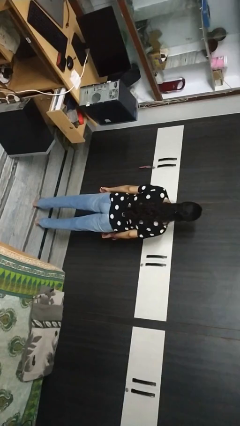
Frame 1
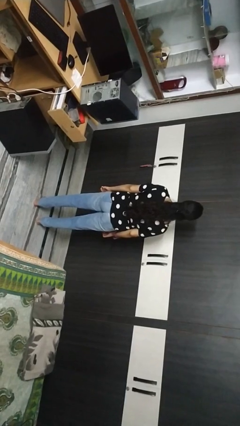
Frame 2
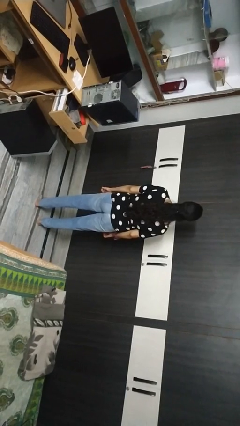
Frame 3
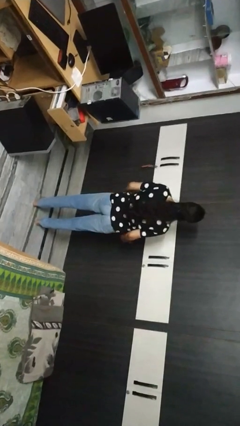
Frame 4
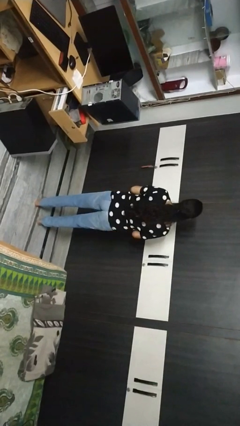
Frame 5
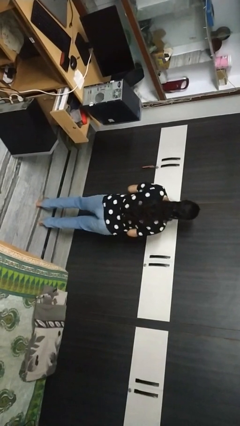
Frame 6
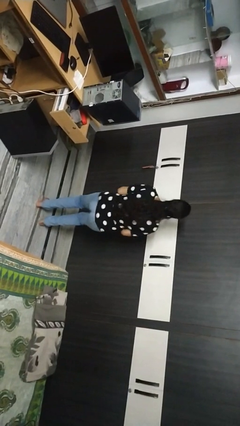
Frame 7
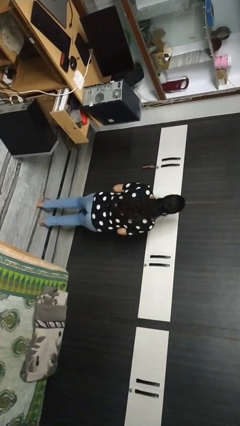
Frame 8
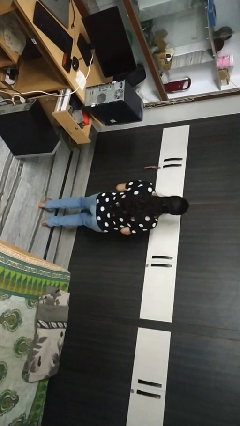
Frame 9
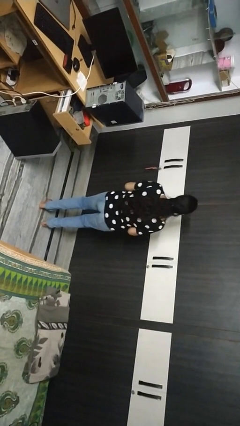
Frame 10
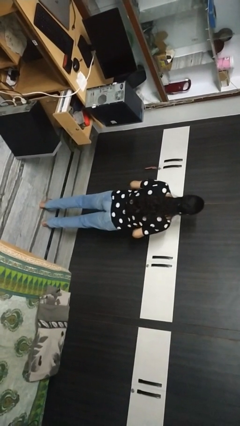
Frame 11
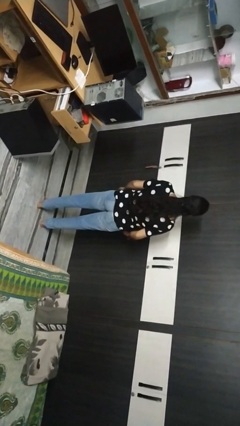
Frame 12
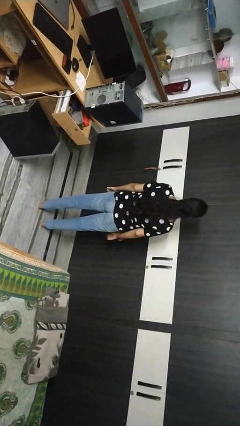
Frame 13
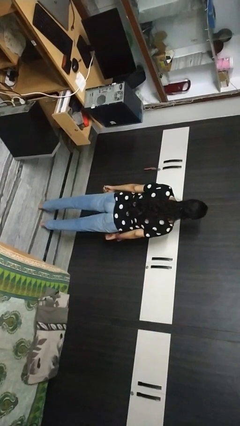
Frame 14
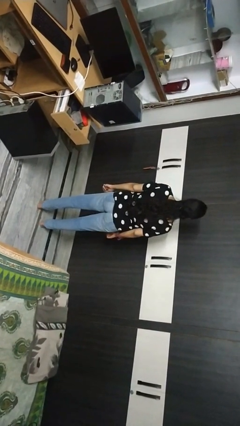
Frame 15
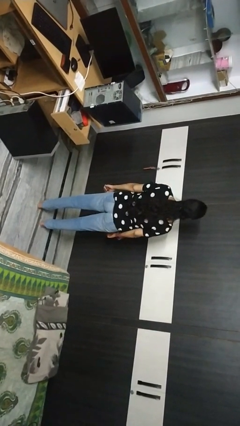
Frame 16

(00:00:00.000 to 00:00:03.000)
person dances in place

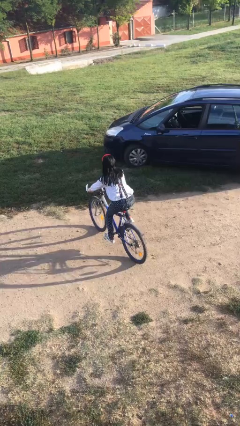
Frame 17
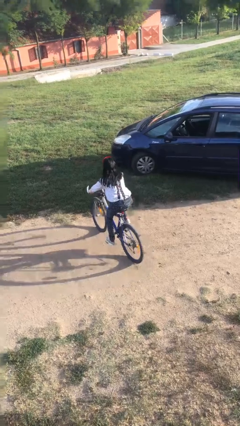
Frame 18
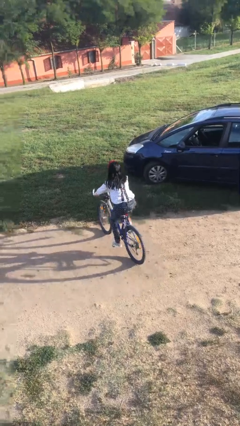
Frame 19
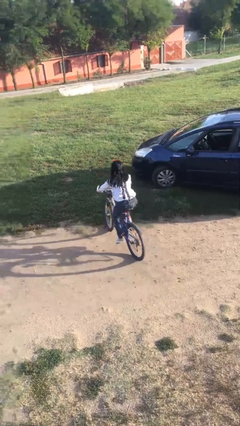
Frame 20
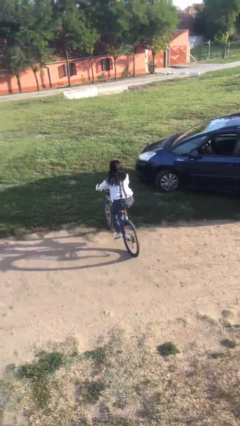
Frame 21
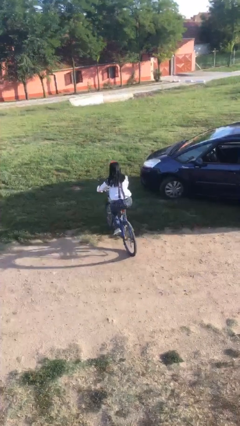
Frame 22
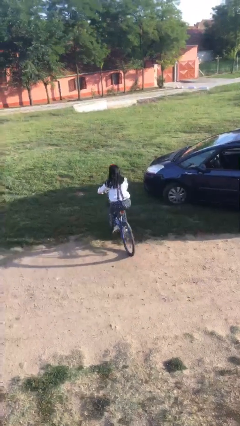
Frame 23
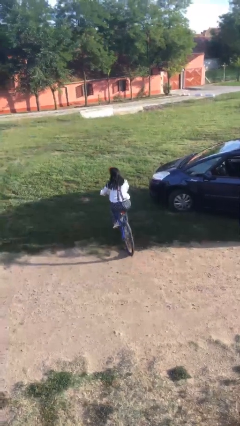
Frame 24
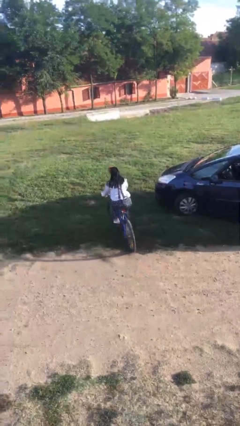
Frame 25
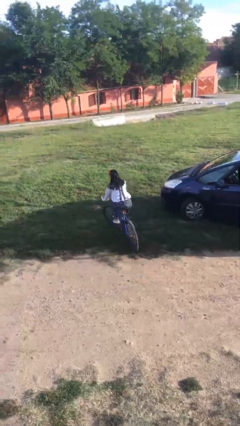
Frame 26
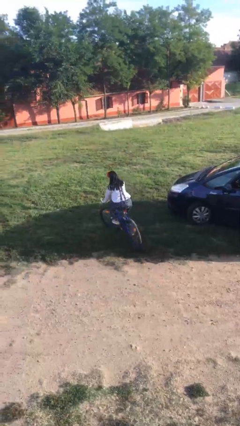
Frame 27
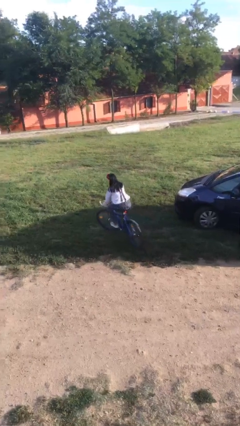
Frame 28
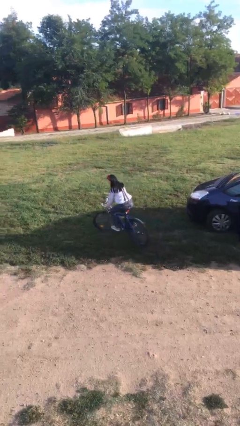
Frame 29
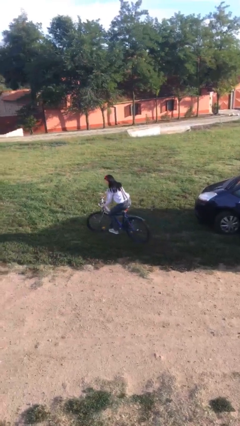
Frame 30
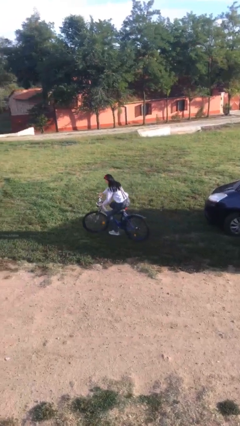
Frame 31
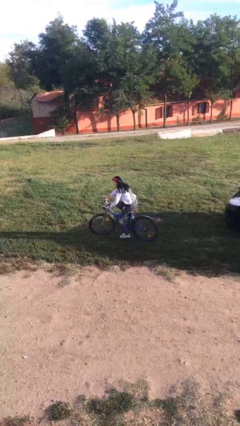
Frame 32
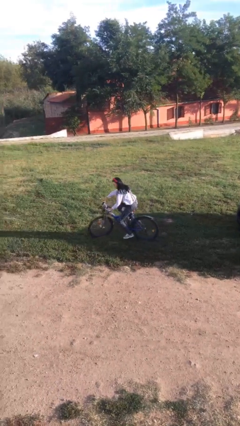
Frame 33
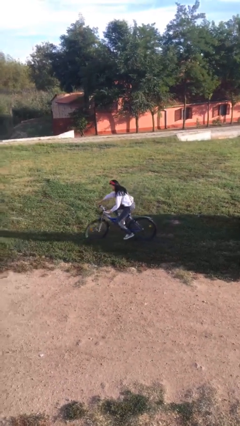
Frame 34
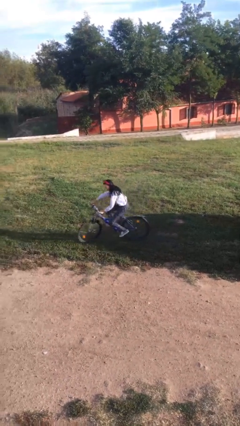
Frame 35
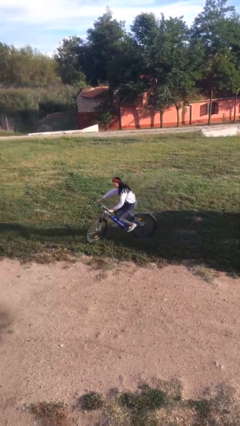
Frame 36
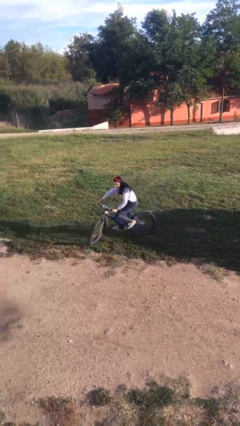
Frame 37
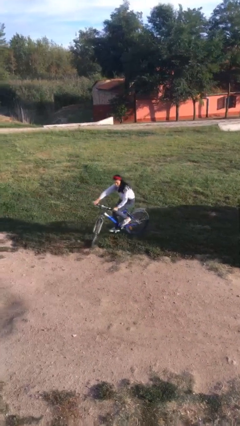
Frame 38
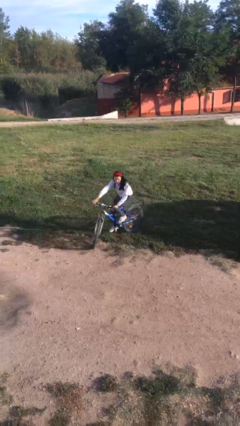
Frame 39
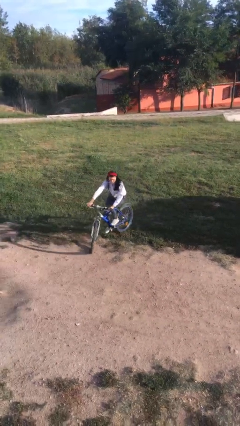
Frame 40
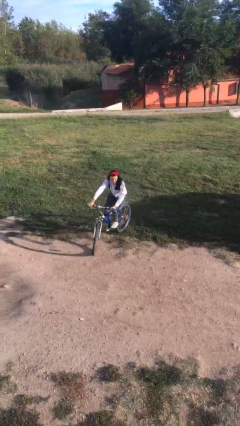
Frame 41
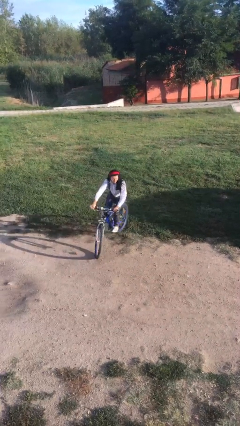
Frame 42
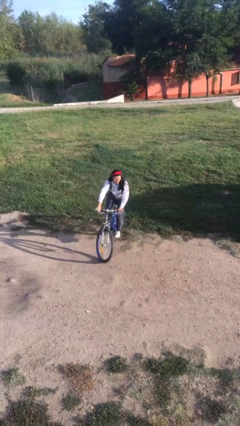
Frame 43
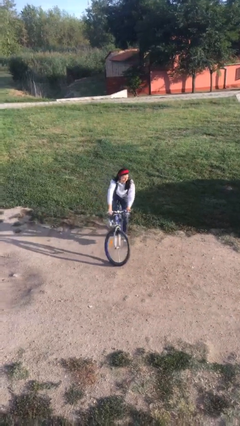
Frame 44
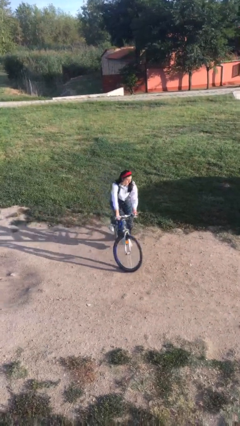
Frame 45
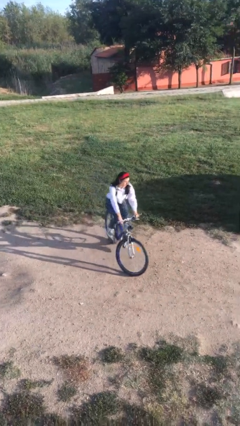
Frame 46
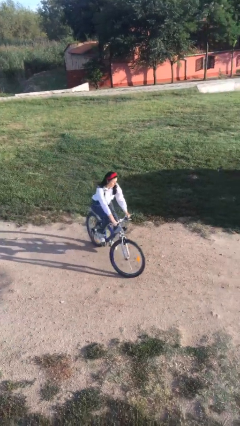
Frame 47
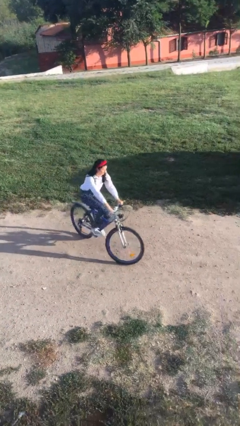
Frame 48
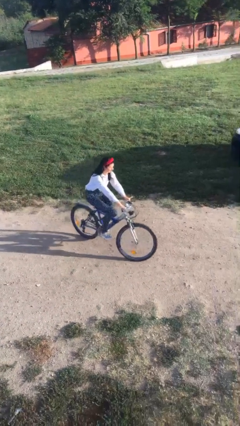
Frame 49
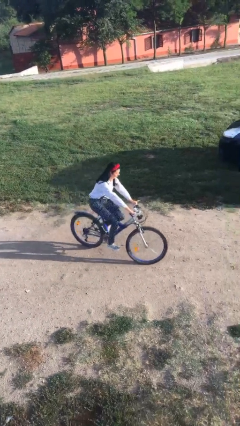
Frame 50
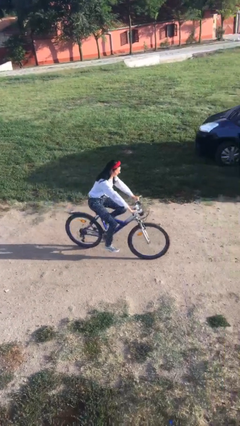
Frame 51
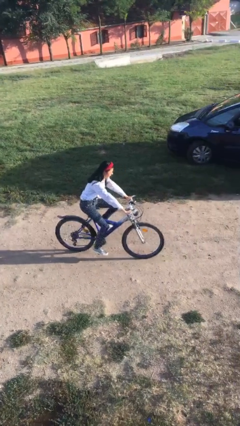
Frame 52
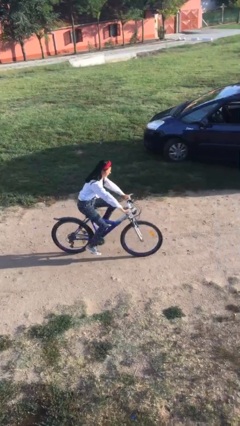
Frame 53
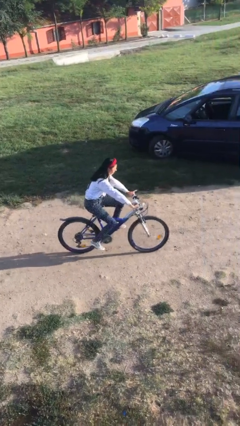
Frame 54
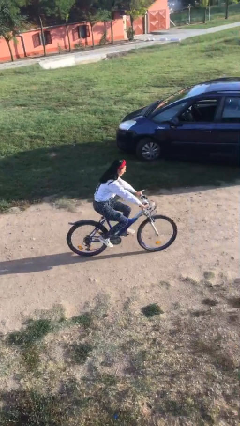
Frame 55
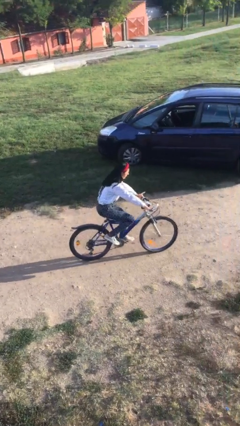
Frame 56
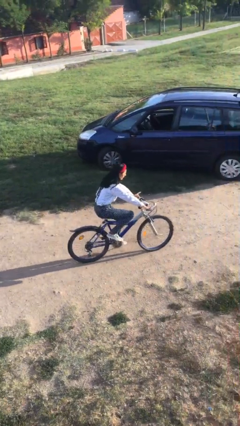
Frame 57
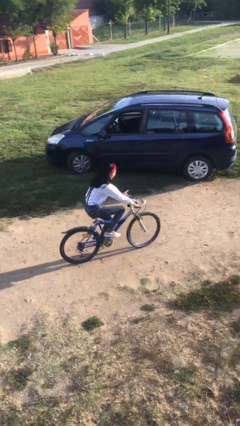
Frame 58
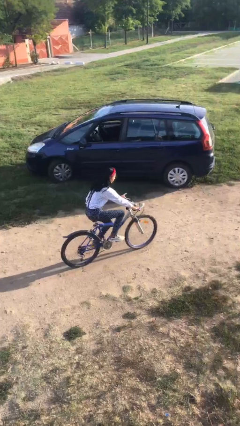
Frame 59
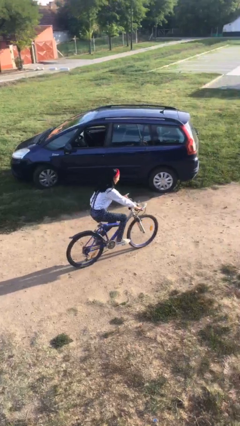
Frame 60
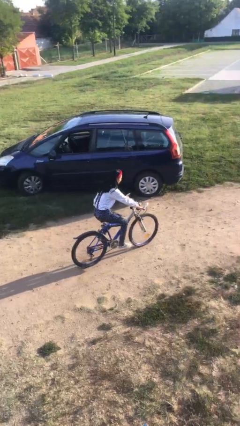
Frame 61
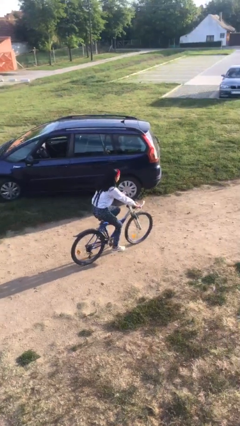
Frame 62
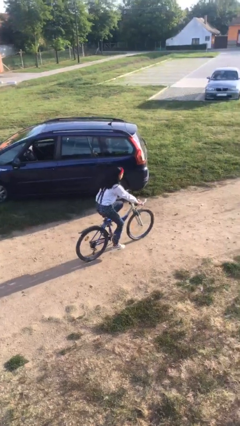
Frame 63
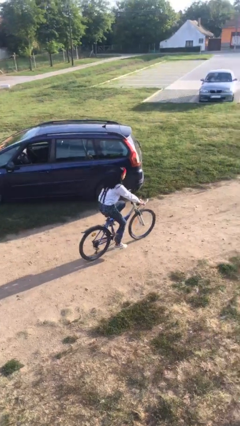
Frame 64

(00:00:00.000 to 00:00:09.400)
person rides bicycle

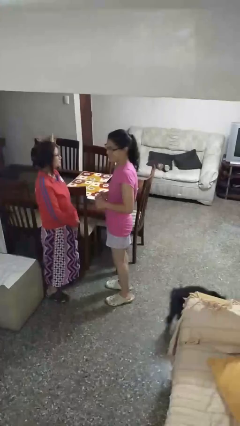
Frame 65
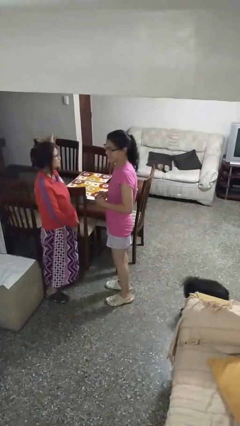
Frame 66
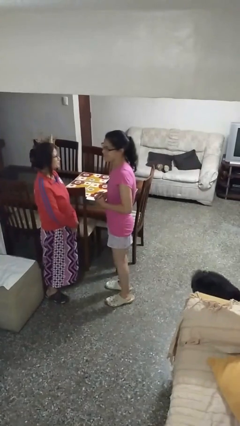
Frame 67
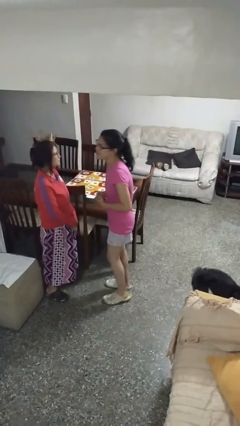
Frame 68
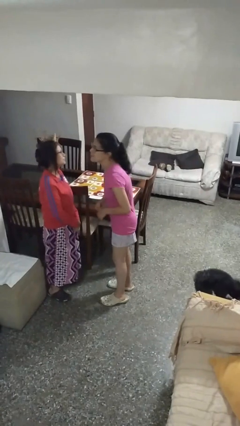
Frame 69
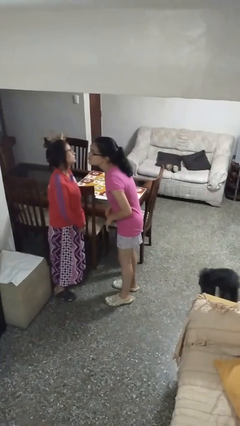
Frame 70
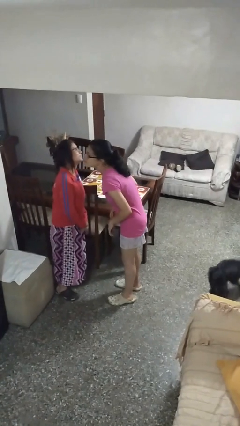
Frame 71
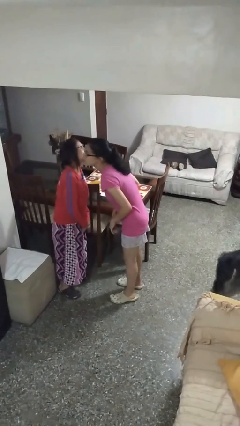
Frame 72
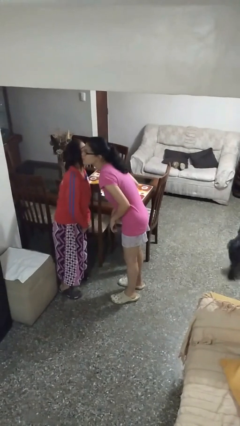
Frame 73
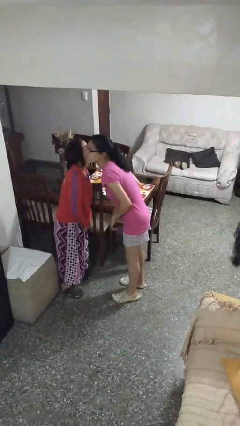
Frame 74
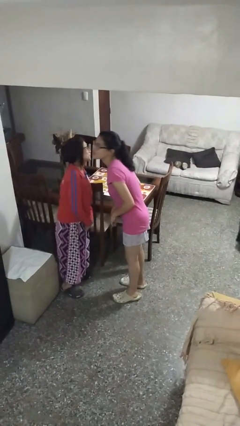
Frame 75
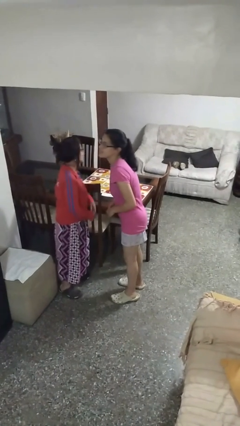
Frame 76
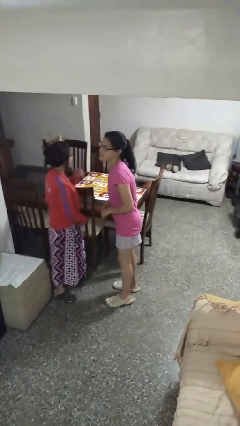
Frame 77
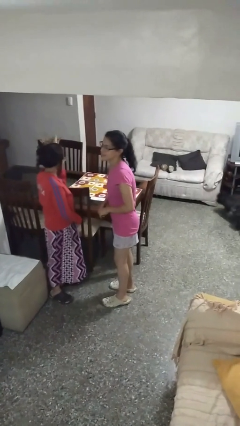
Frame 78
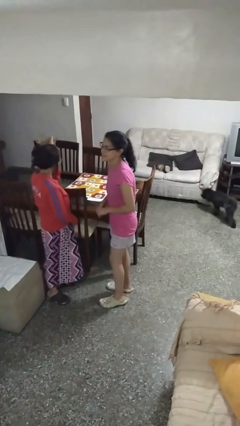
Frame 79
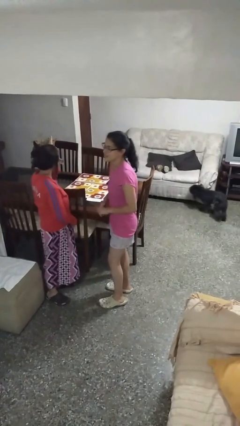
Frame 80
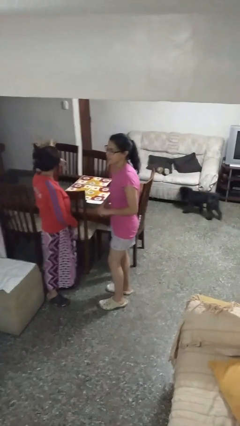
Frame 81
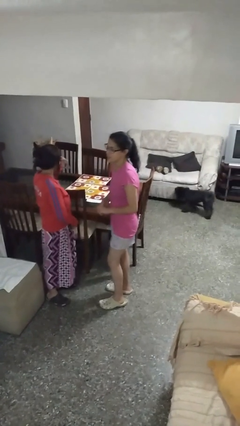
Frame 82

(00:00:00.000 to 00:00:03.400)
person kisses cheek of person

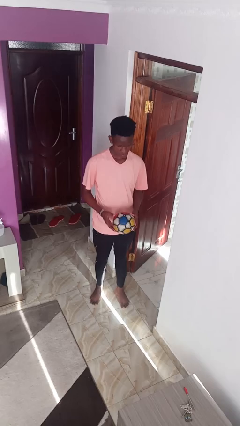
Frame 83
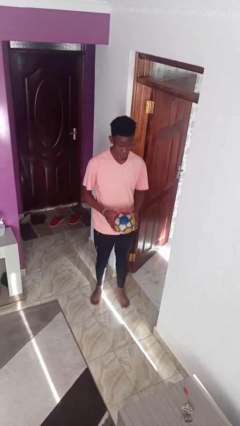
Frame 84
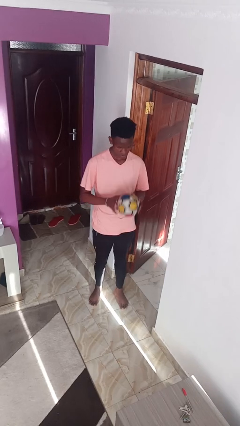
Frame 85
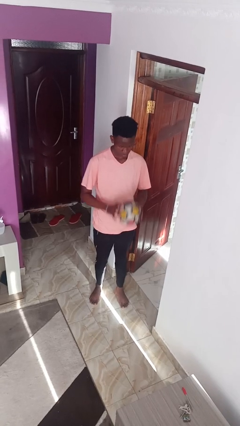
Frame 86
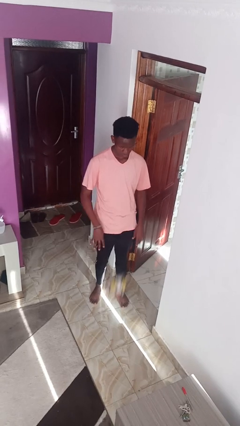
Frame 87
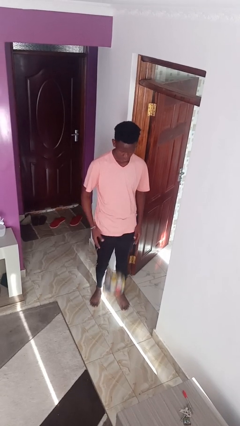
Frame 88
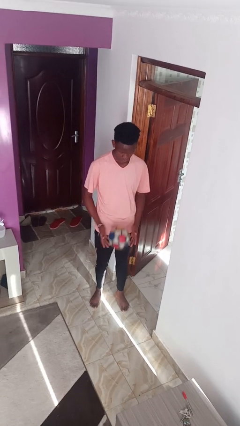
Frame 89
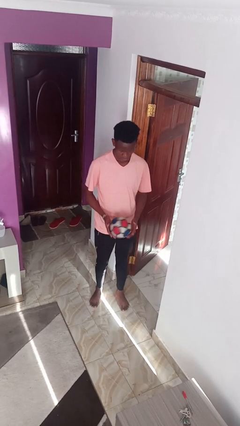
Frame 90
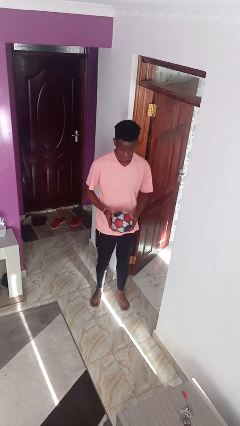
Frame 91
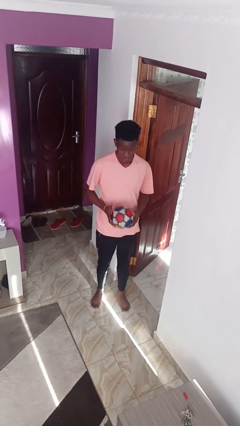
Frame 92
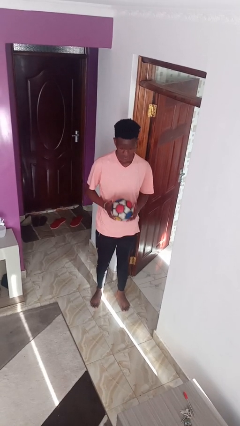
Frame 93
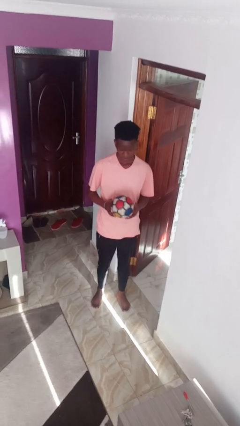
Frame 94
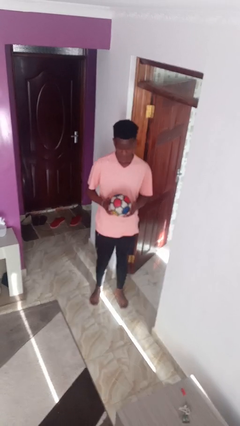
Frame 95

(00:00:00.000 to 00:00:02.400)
person bounces ball on floor
